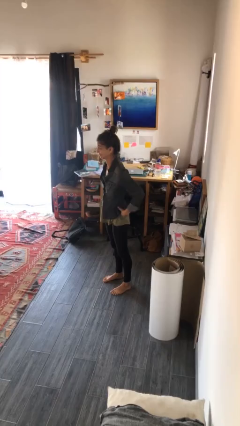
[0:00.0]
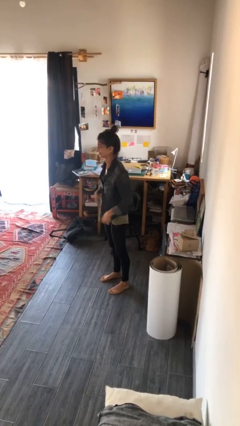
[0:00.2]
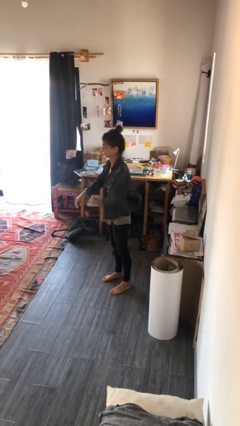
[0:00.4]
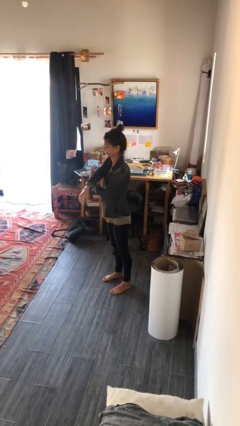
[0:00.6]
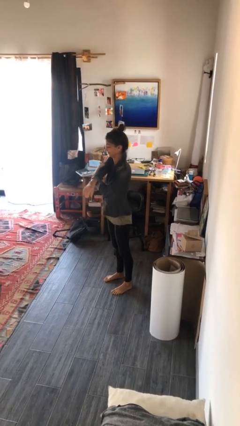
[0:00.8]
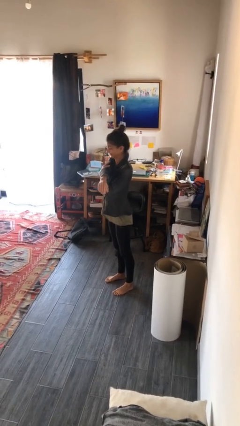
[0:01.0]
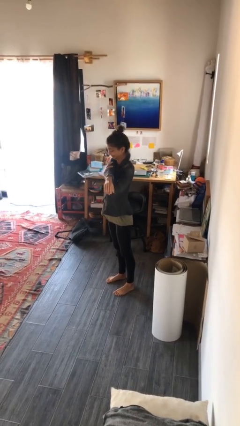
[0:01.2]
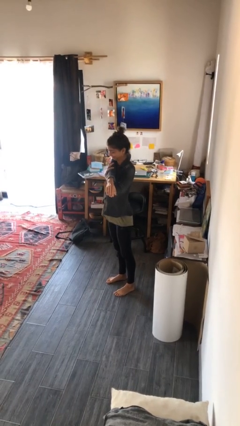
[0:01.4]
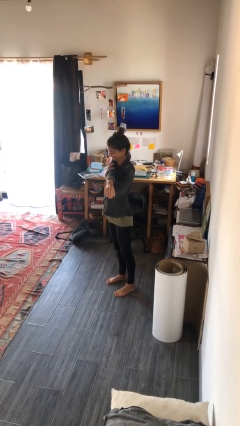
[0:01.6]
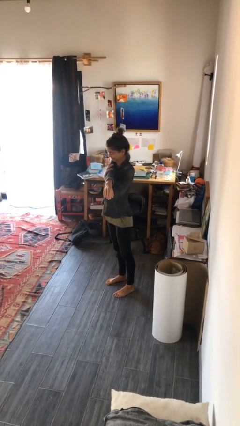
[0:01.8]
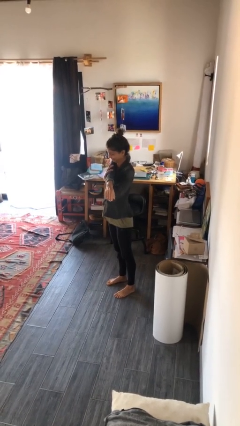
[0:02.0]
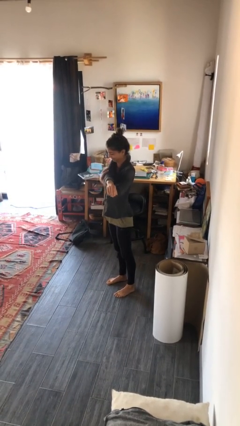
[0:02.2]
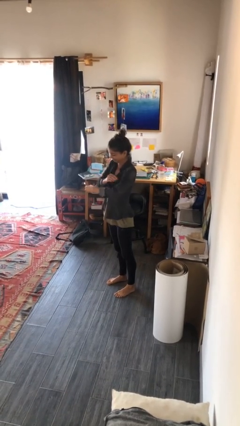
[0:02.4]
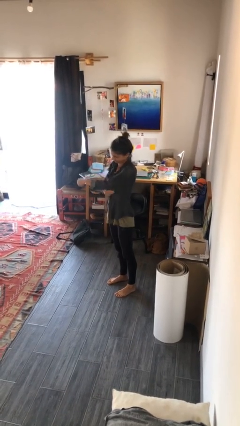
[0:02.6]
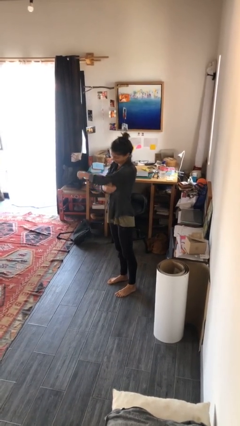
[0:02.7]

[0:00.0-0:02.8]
person stretches arms to side

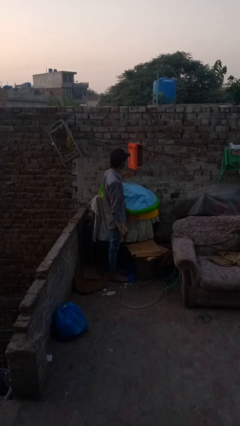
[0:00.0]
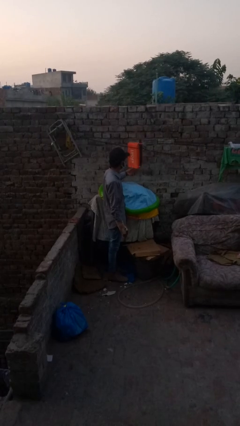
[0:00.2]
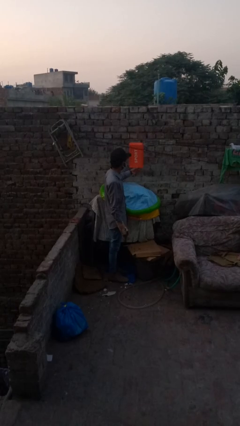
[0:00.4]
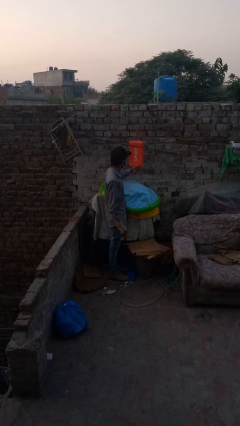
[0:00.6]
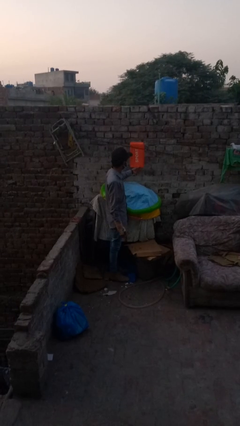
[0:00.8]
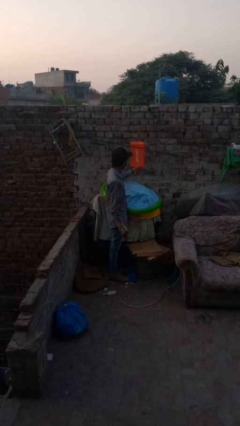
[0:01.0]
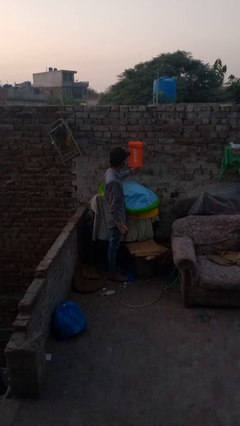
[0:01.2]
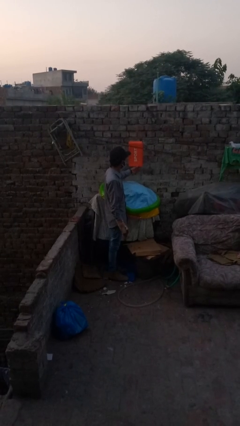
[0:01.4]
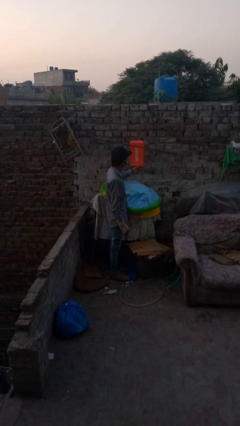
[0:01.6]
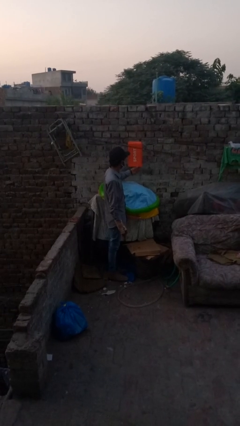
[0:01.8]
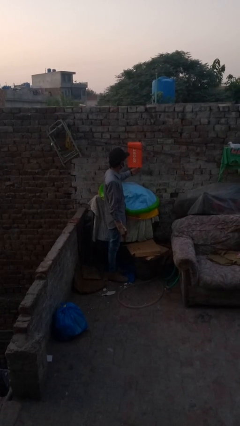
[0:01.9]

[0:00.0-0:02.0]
person closes mailbox

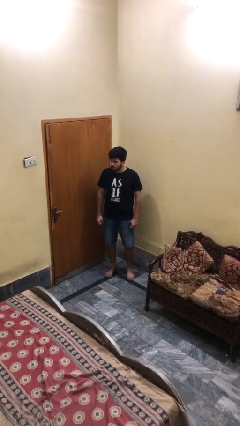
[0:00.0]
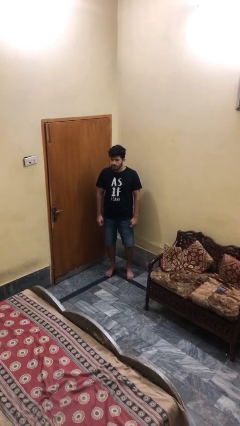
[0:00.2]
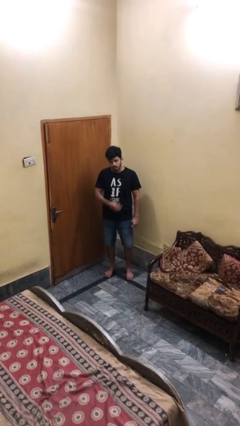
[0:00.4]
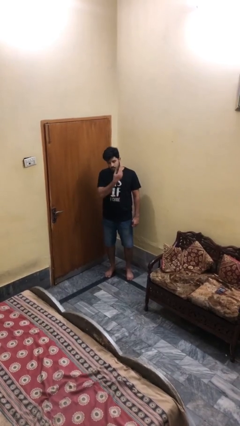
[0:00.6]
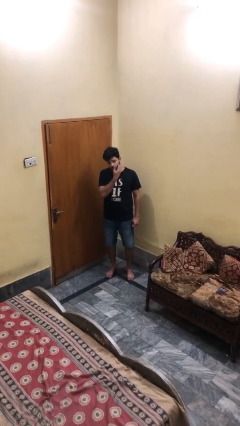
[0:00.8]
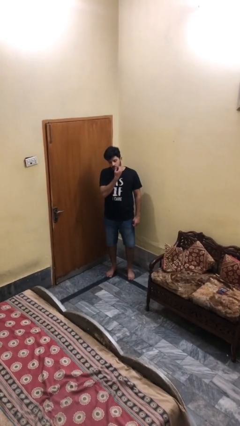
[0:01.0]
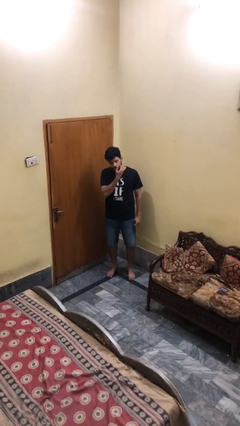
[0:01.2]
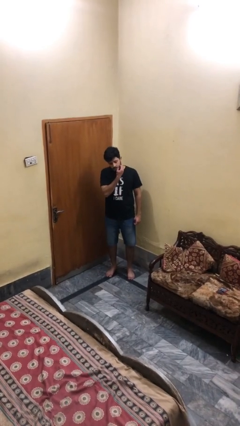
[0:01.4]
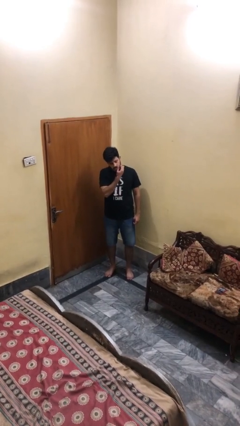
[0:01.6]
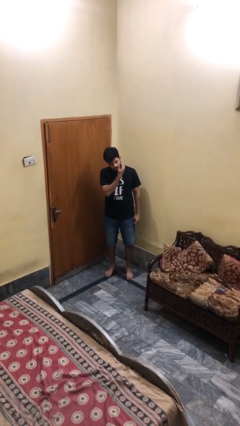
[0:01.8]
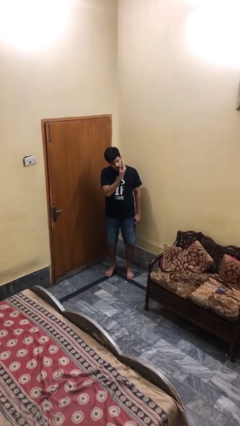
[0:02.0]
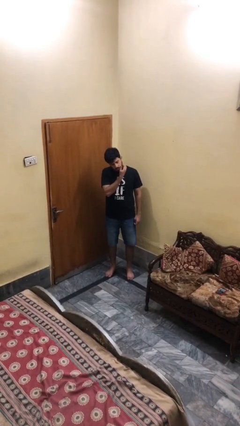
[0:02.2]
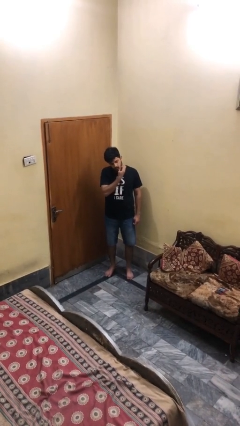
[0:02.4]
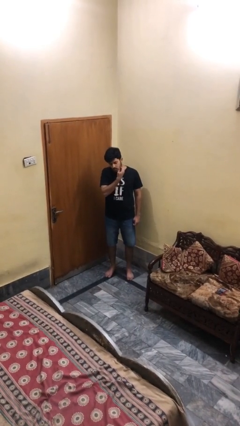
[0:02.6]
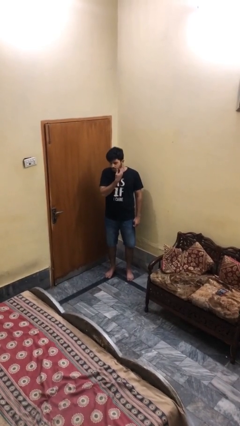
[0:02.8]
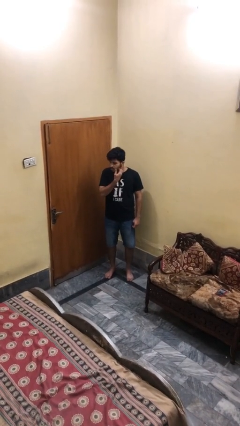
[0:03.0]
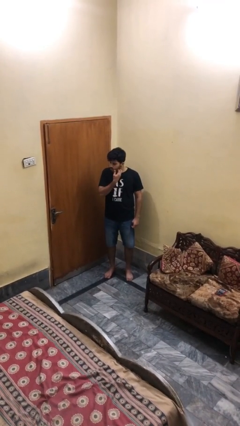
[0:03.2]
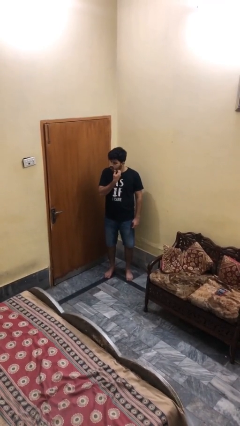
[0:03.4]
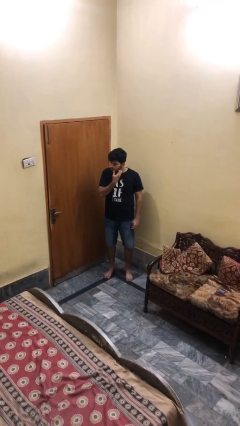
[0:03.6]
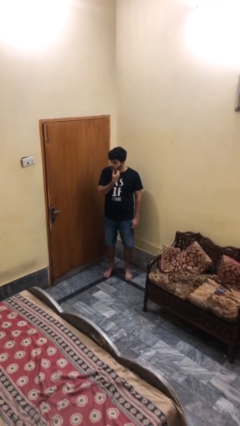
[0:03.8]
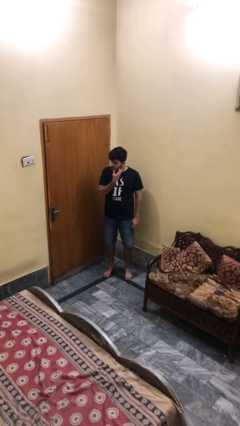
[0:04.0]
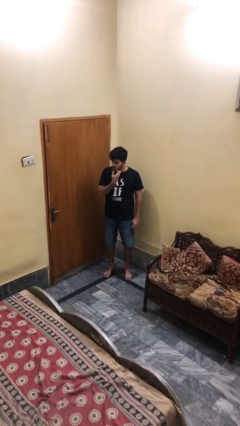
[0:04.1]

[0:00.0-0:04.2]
person scratches face

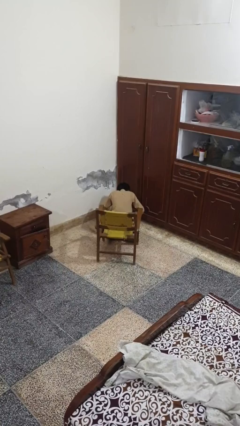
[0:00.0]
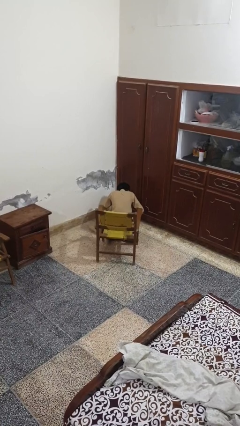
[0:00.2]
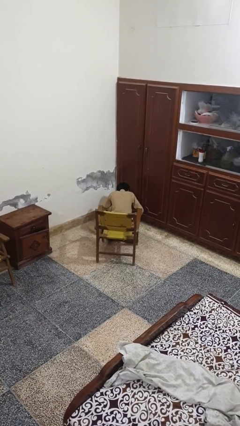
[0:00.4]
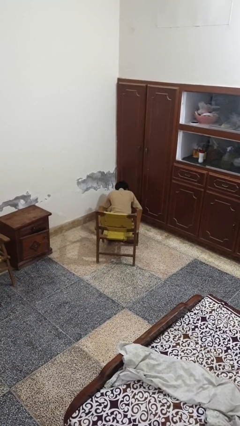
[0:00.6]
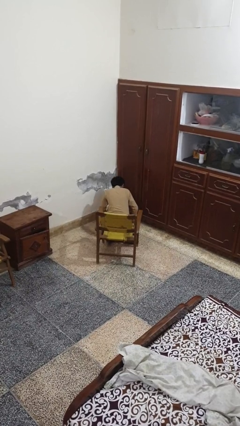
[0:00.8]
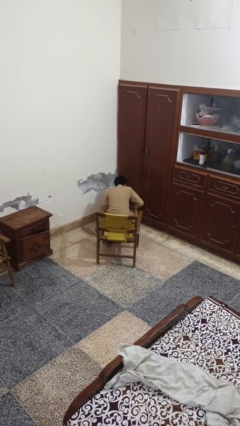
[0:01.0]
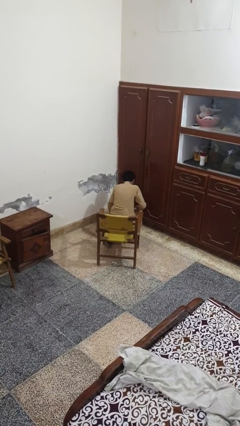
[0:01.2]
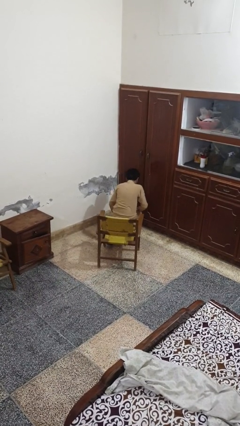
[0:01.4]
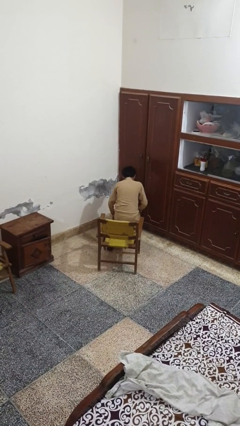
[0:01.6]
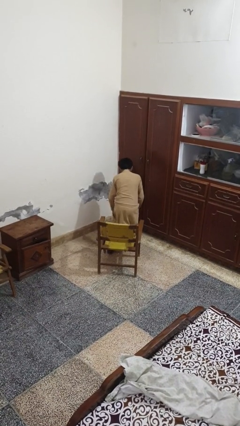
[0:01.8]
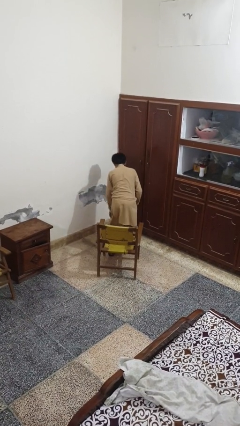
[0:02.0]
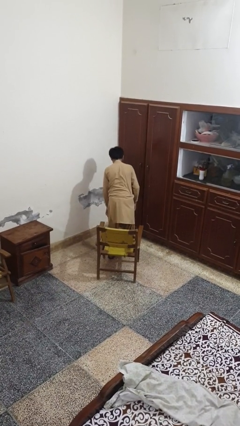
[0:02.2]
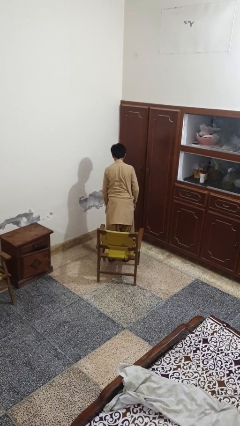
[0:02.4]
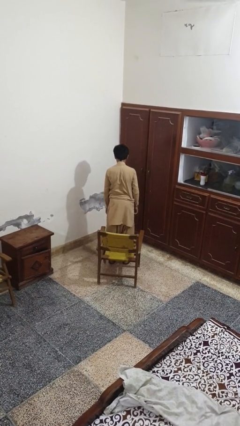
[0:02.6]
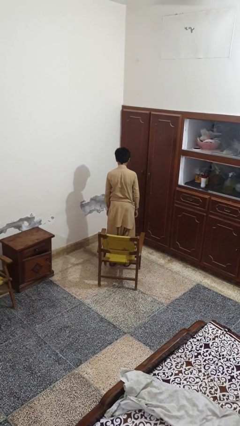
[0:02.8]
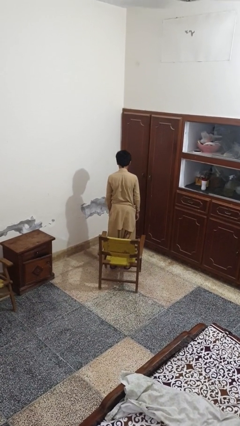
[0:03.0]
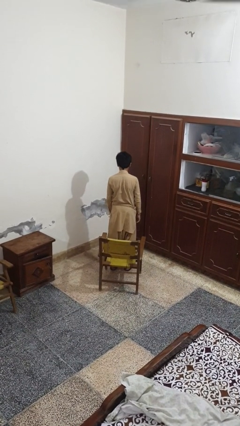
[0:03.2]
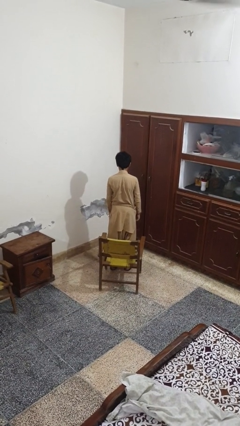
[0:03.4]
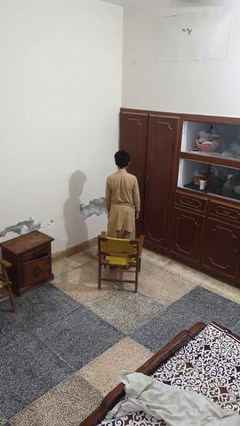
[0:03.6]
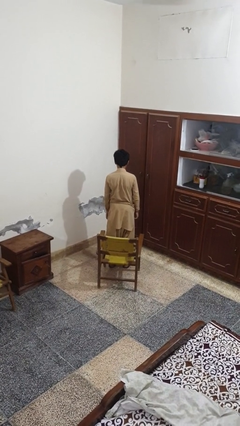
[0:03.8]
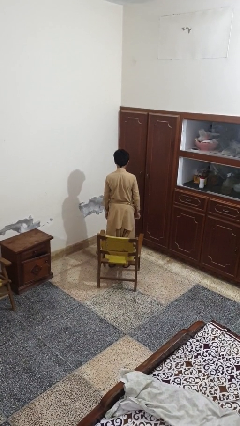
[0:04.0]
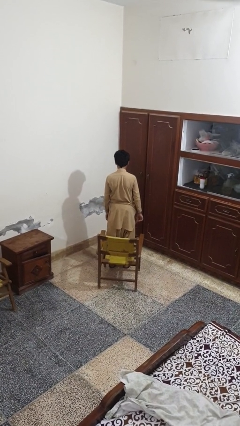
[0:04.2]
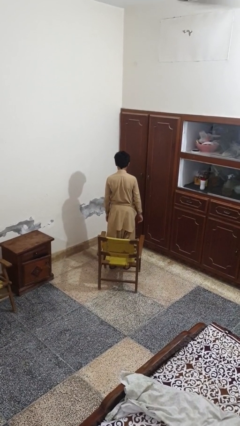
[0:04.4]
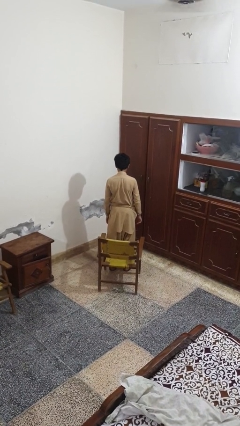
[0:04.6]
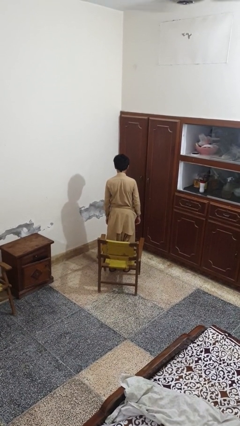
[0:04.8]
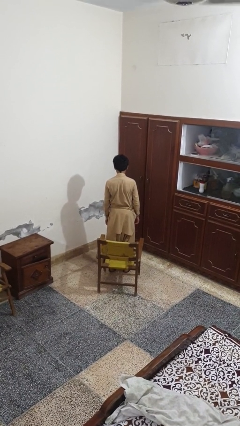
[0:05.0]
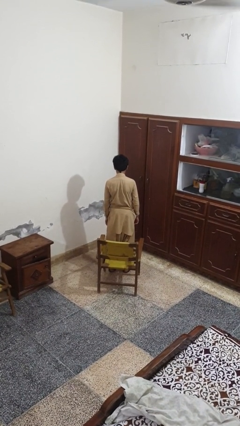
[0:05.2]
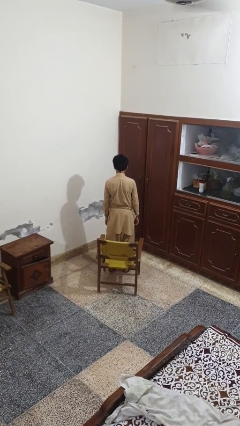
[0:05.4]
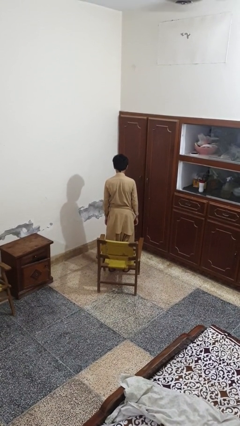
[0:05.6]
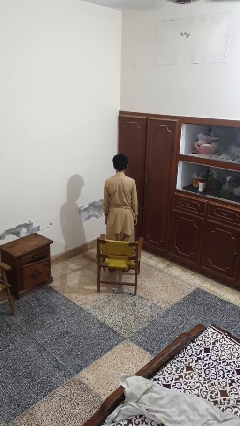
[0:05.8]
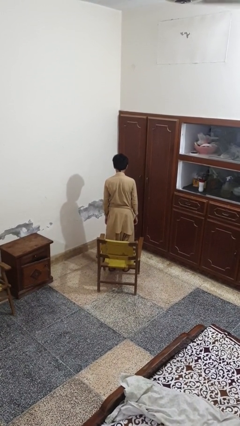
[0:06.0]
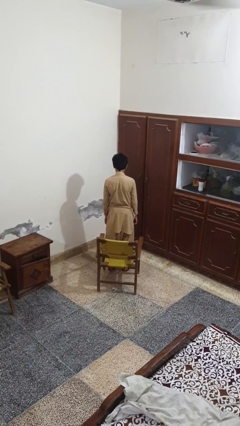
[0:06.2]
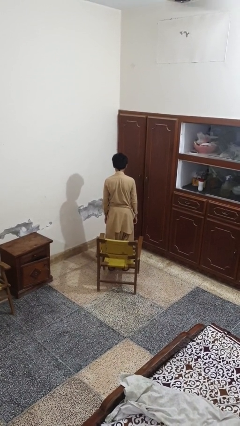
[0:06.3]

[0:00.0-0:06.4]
person stands up from floor

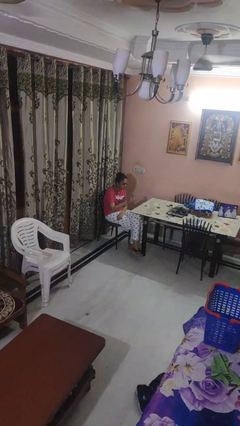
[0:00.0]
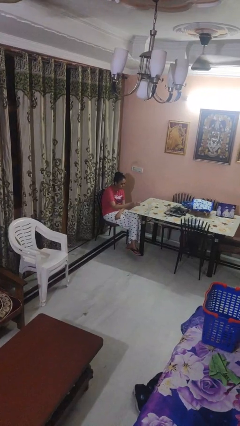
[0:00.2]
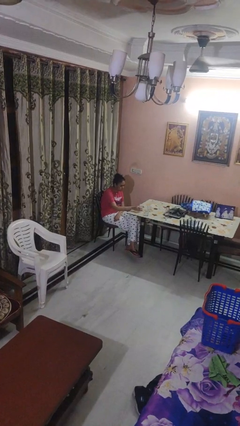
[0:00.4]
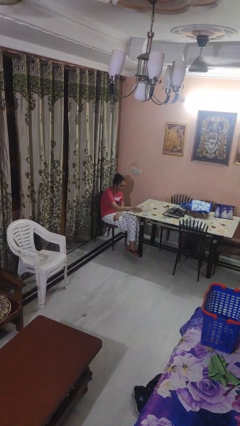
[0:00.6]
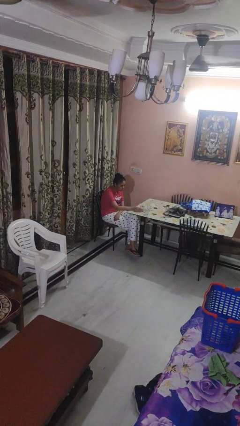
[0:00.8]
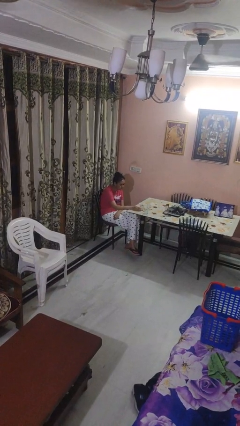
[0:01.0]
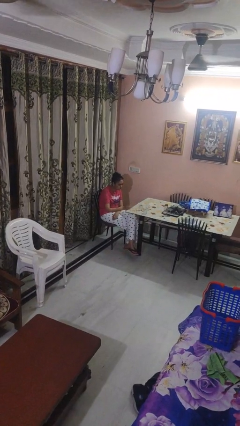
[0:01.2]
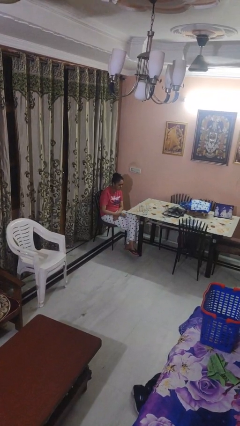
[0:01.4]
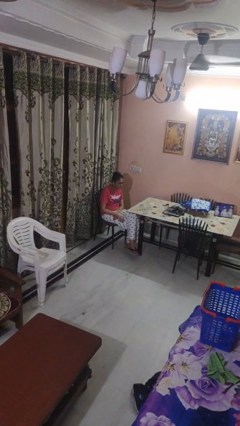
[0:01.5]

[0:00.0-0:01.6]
person puts down object on table

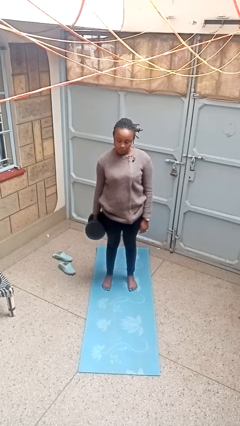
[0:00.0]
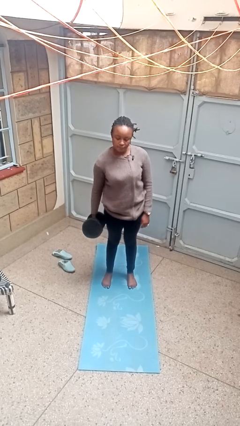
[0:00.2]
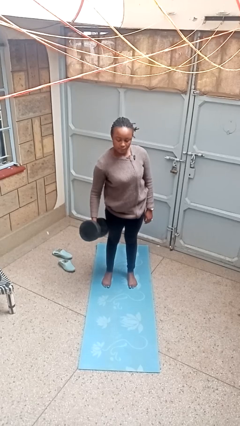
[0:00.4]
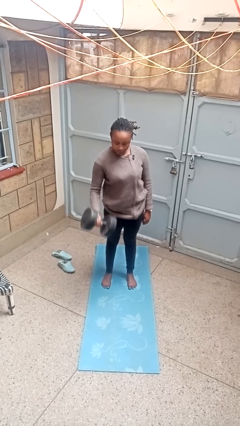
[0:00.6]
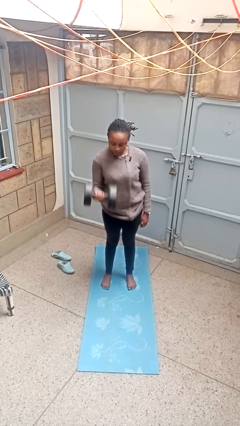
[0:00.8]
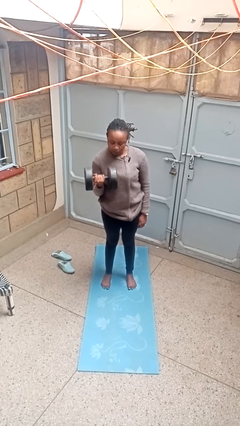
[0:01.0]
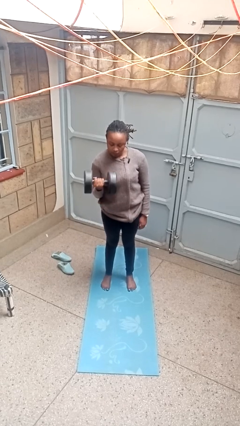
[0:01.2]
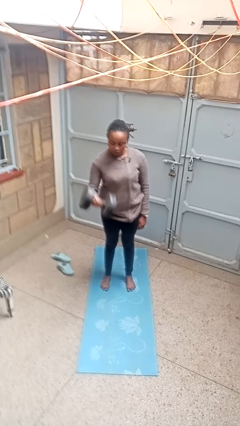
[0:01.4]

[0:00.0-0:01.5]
person lifts dumbbells
